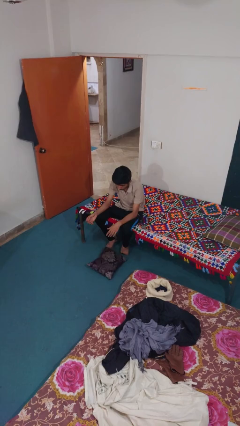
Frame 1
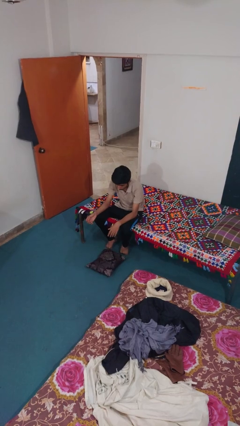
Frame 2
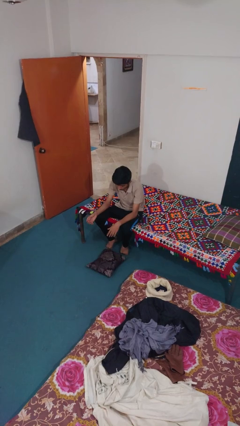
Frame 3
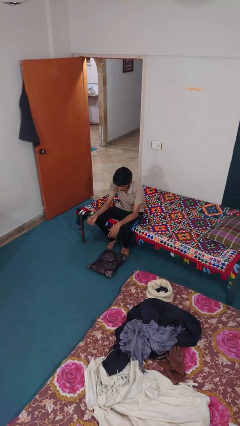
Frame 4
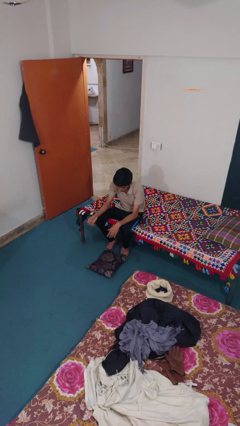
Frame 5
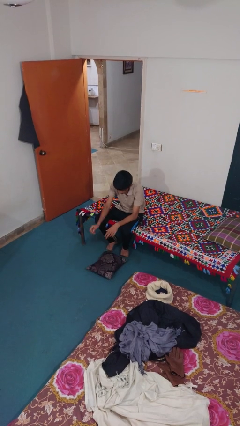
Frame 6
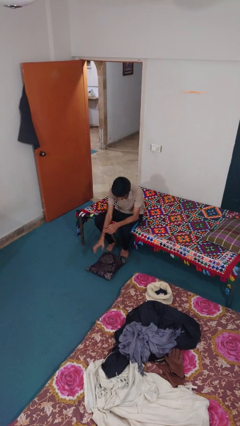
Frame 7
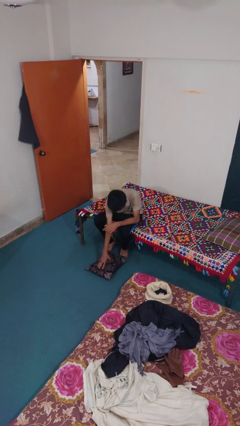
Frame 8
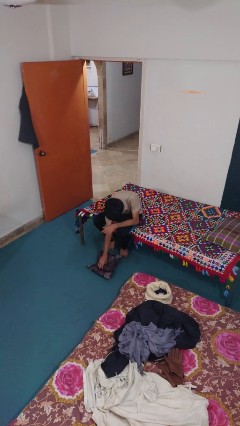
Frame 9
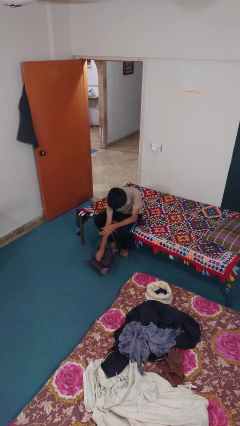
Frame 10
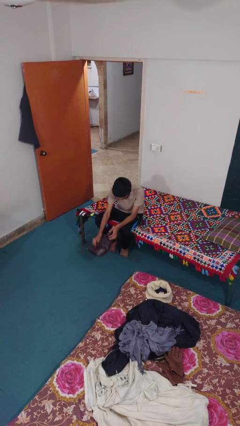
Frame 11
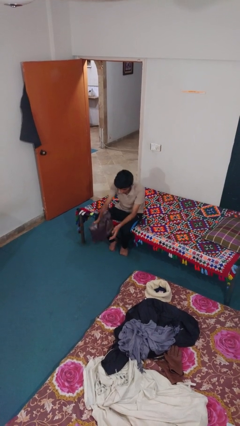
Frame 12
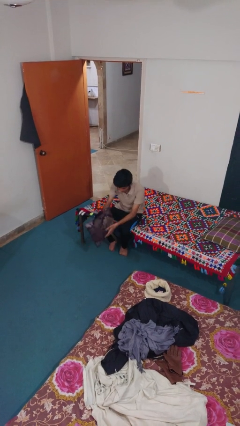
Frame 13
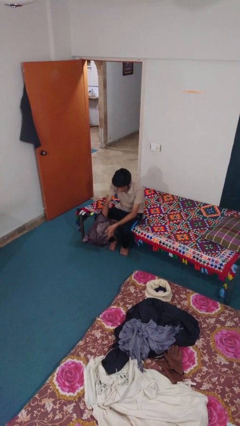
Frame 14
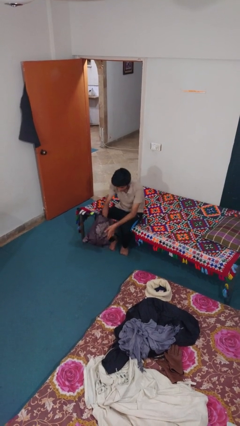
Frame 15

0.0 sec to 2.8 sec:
person picks up object from floor

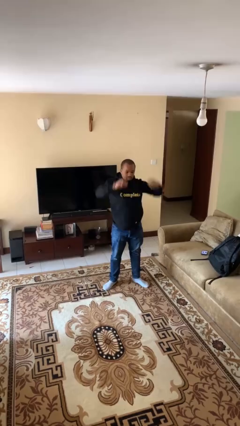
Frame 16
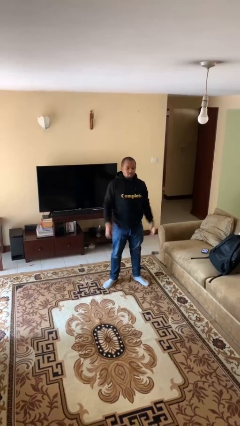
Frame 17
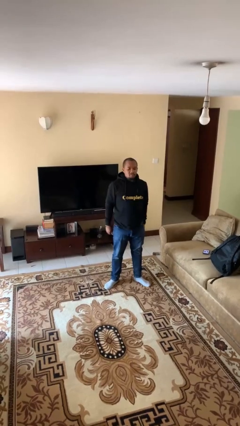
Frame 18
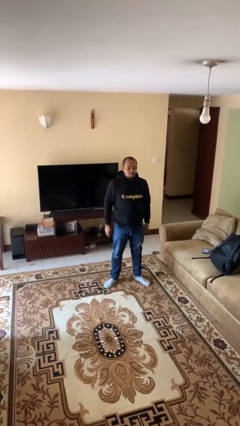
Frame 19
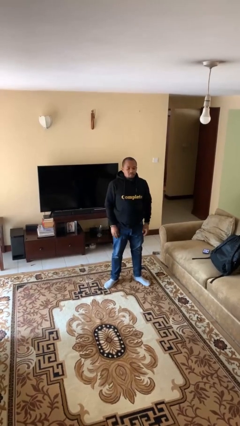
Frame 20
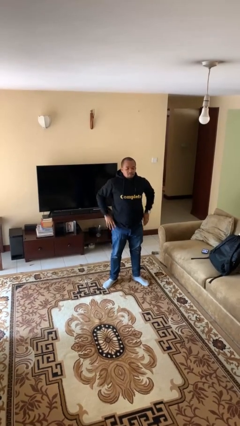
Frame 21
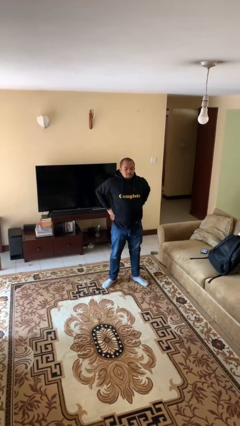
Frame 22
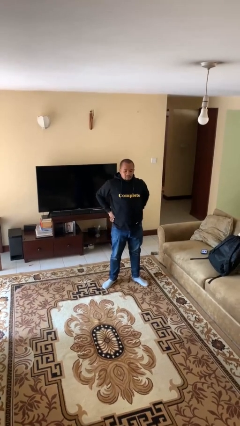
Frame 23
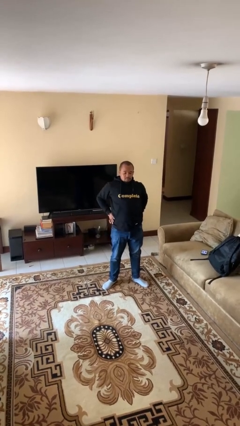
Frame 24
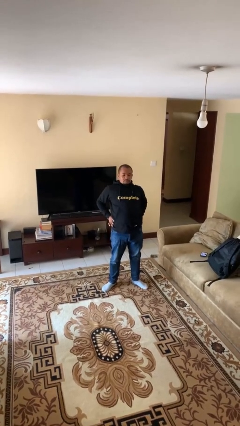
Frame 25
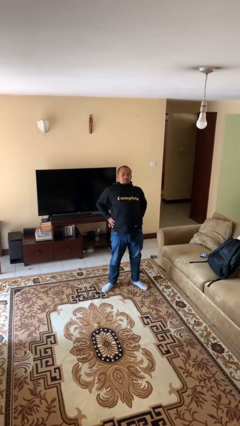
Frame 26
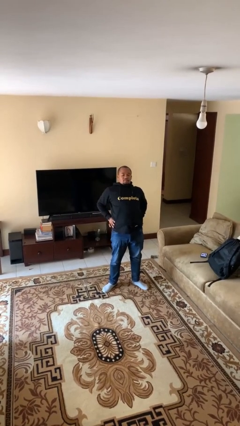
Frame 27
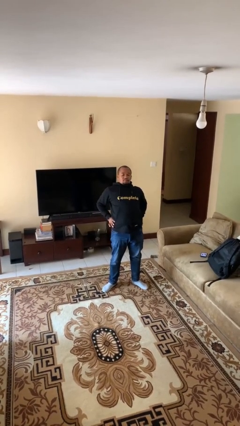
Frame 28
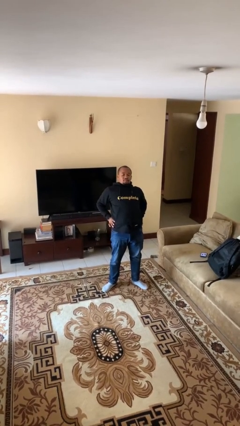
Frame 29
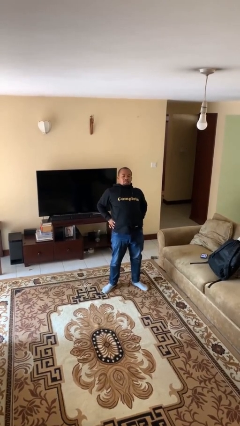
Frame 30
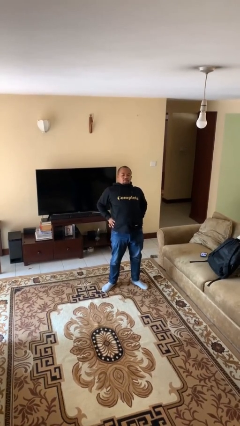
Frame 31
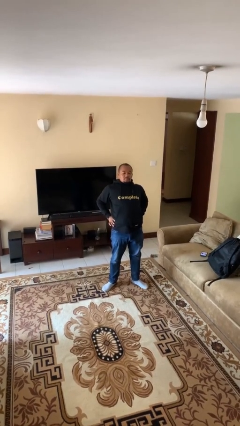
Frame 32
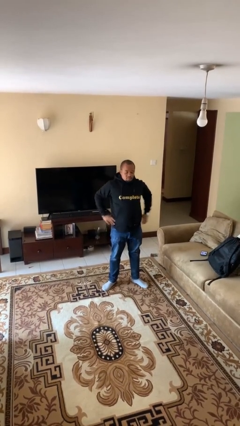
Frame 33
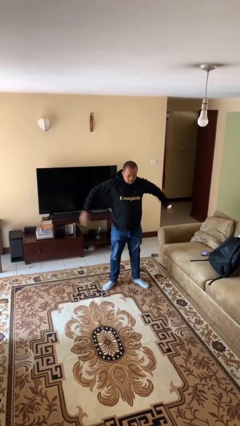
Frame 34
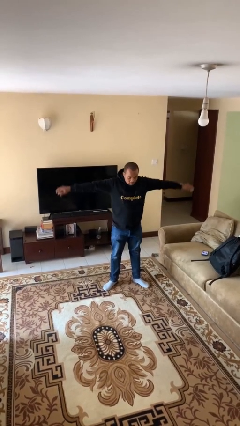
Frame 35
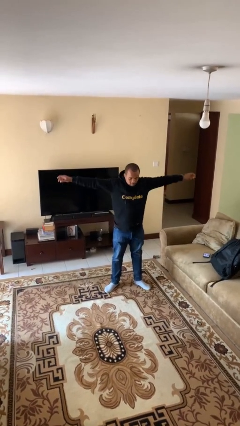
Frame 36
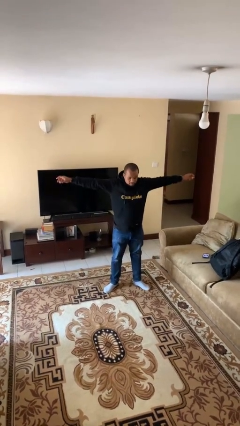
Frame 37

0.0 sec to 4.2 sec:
person stretches back

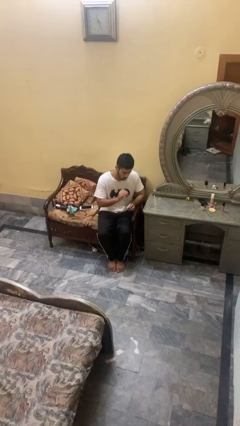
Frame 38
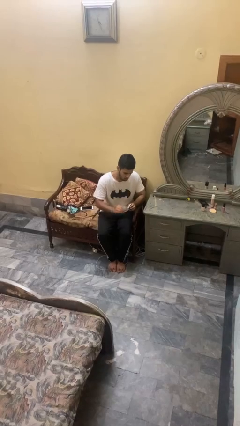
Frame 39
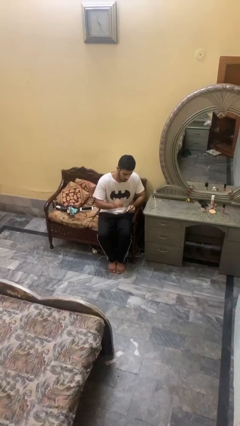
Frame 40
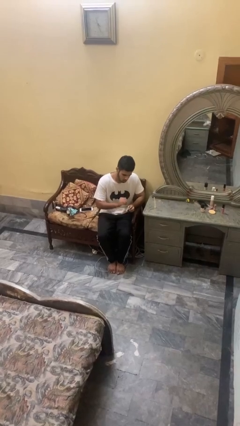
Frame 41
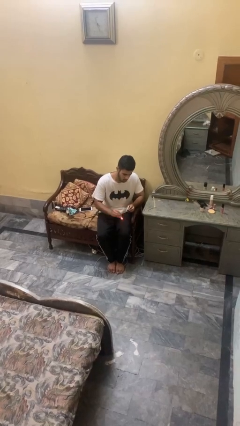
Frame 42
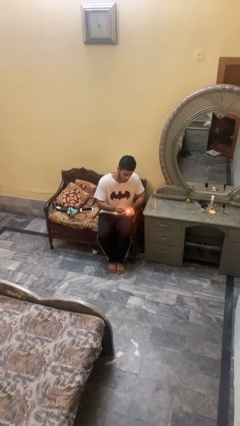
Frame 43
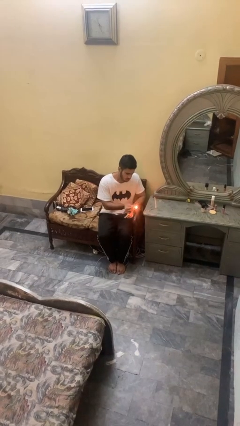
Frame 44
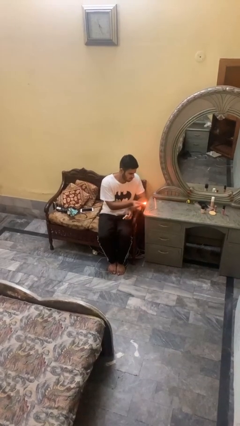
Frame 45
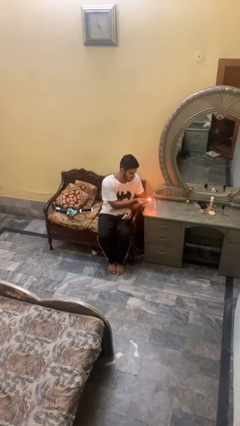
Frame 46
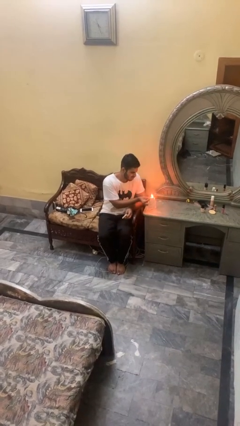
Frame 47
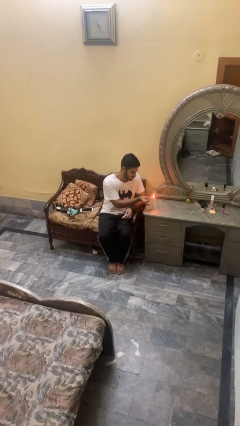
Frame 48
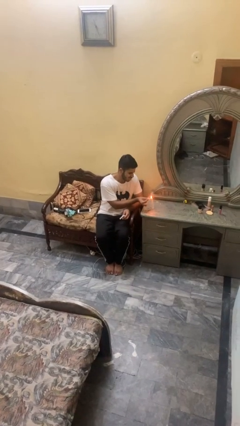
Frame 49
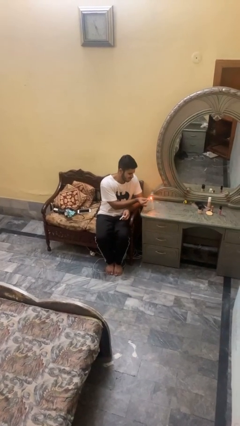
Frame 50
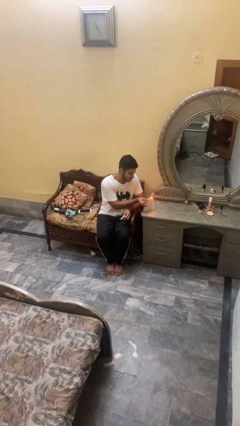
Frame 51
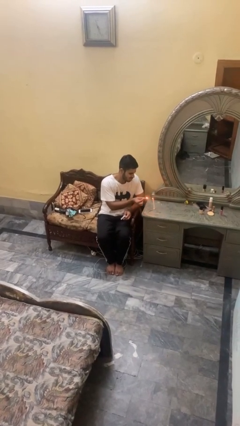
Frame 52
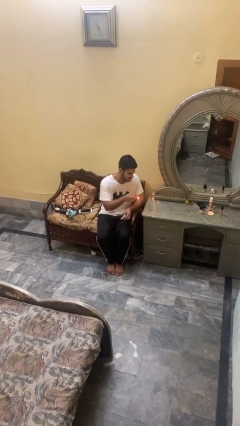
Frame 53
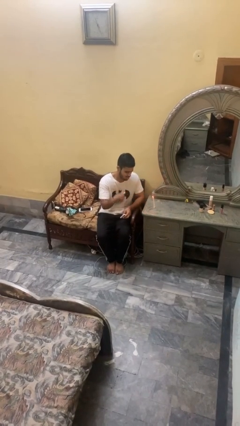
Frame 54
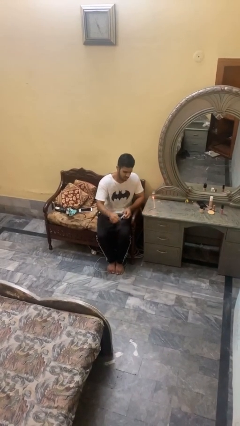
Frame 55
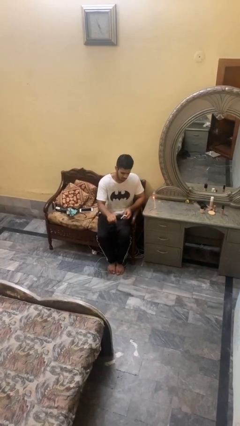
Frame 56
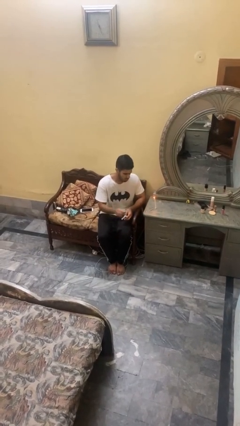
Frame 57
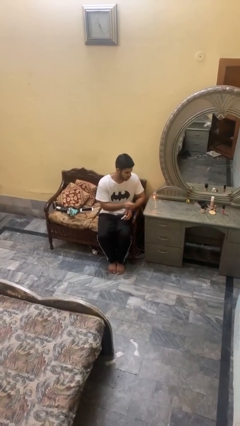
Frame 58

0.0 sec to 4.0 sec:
person lights candle

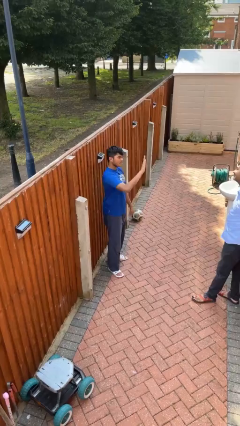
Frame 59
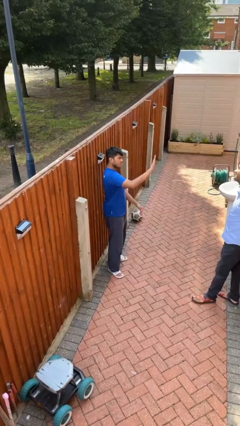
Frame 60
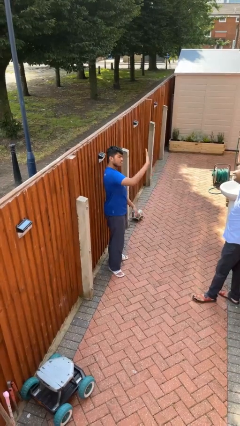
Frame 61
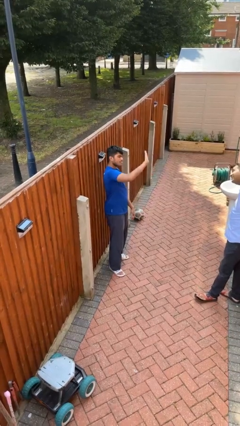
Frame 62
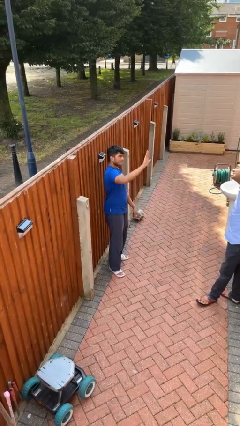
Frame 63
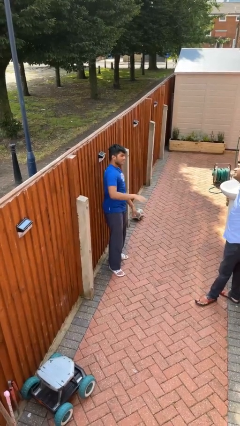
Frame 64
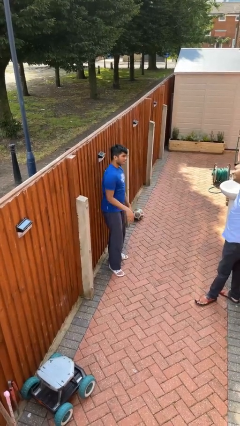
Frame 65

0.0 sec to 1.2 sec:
person waves at person

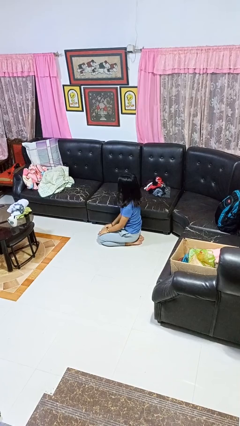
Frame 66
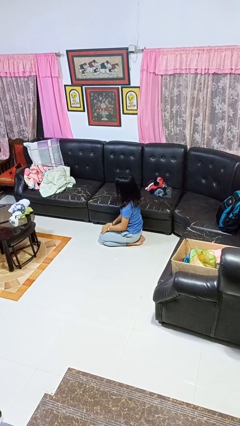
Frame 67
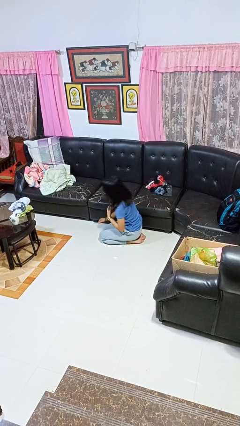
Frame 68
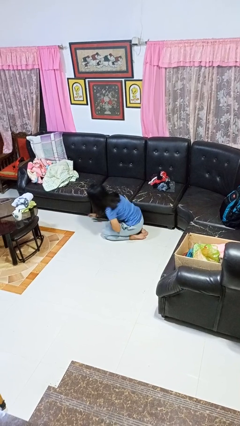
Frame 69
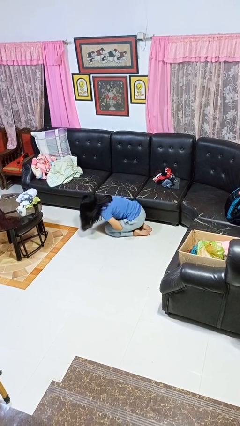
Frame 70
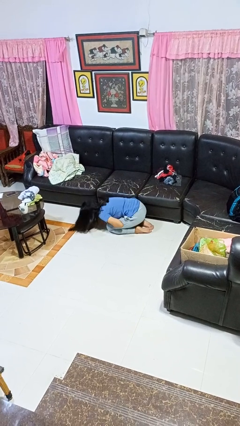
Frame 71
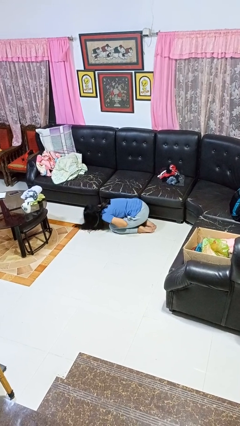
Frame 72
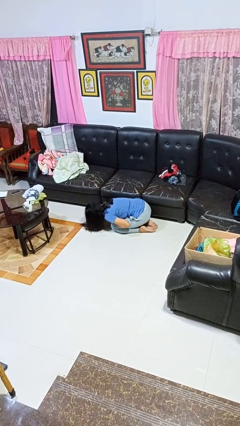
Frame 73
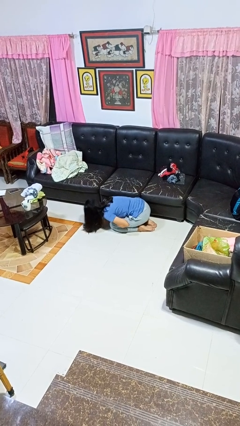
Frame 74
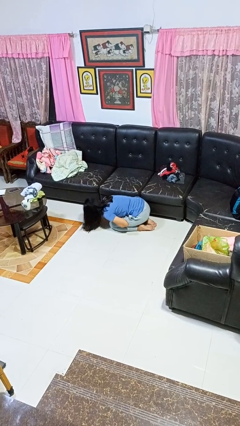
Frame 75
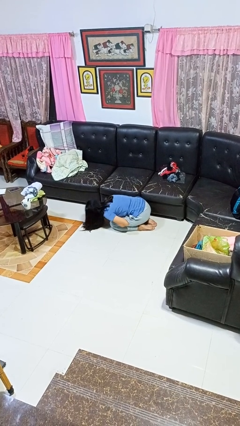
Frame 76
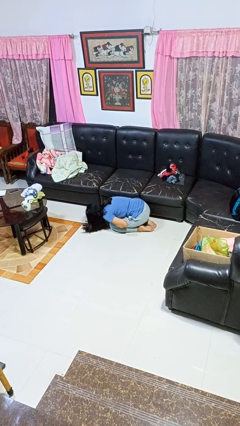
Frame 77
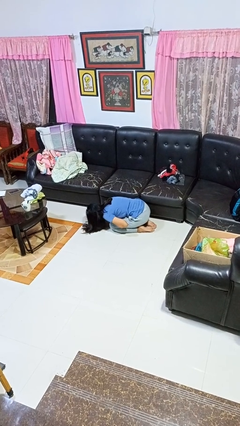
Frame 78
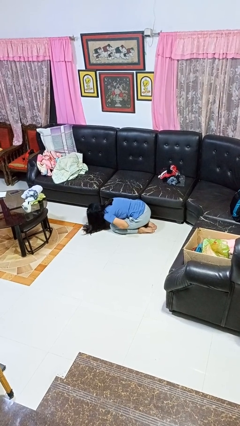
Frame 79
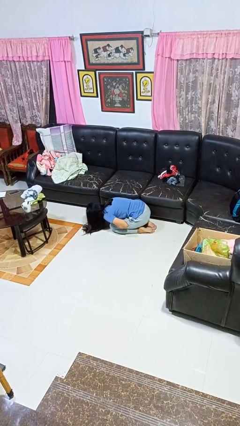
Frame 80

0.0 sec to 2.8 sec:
person searches under couch

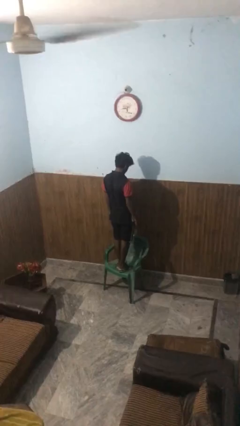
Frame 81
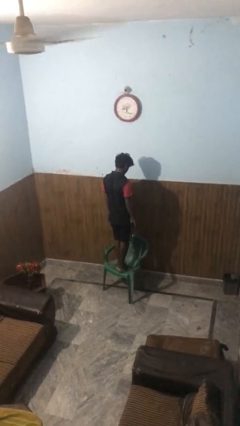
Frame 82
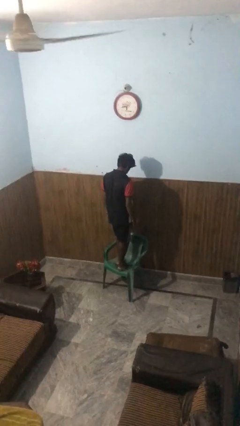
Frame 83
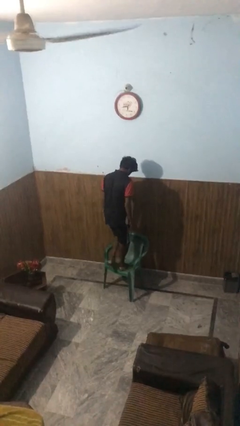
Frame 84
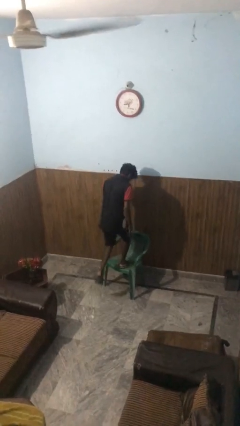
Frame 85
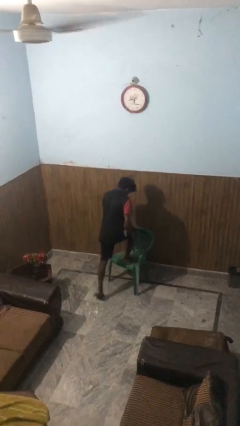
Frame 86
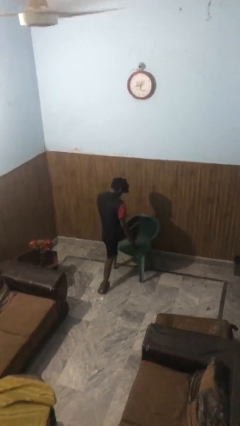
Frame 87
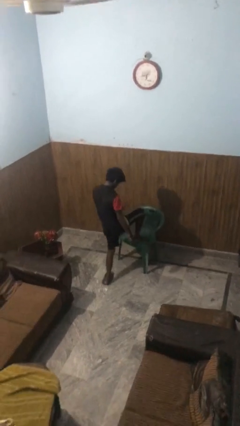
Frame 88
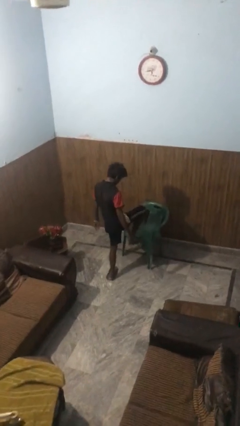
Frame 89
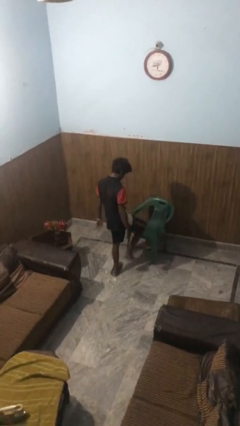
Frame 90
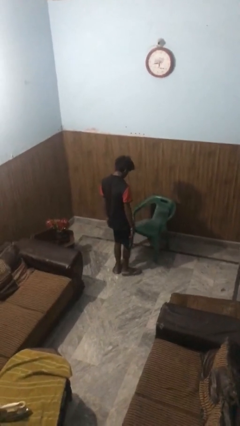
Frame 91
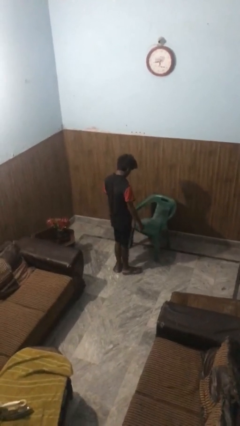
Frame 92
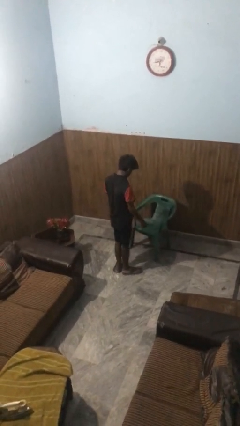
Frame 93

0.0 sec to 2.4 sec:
person climbs off chair
